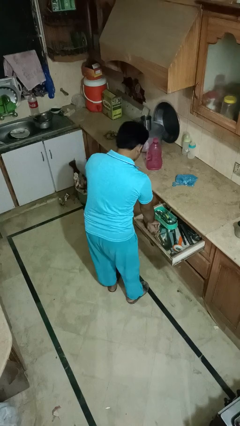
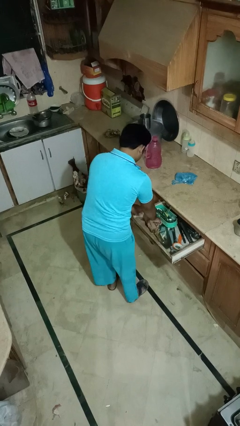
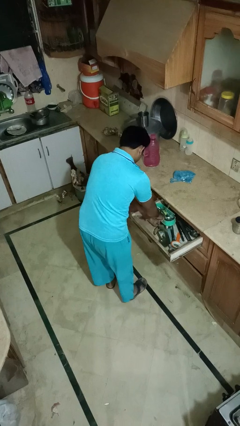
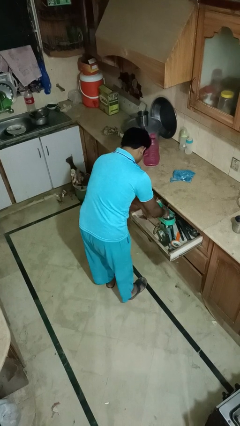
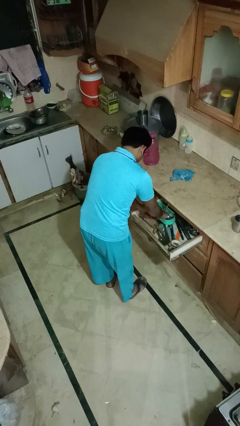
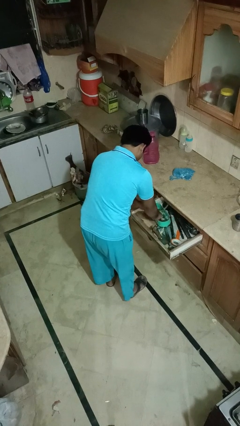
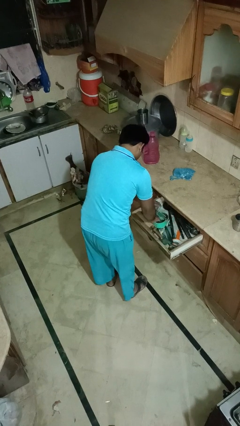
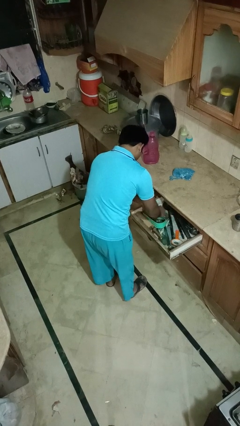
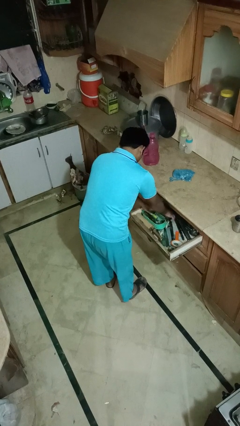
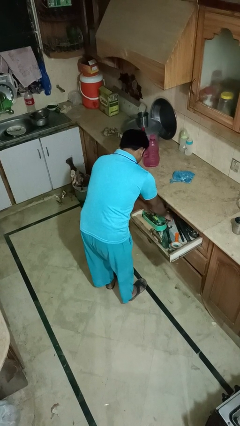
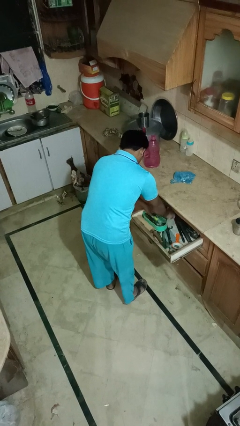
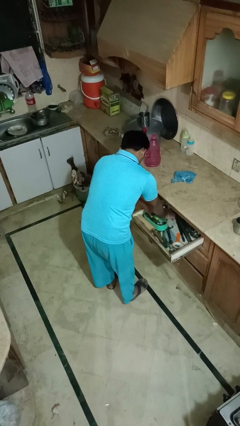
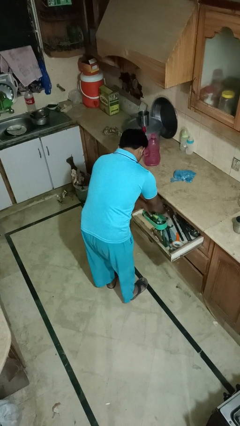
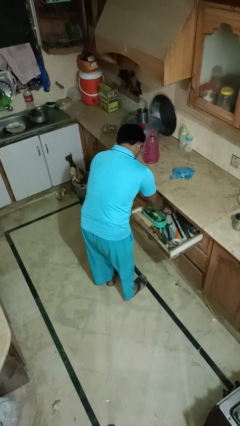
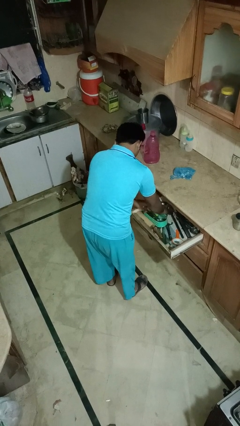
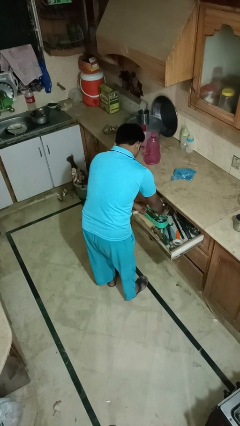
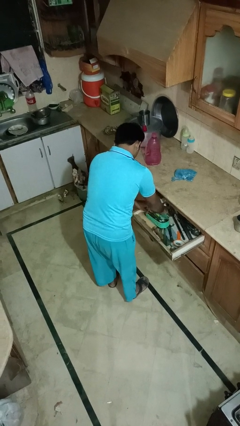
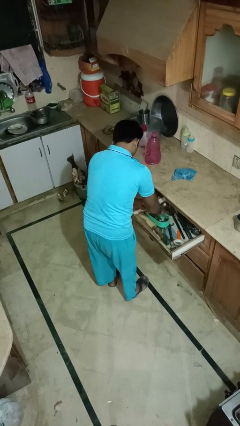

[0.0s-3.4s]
person searches in kitchen drawer

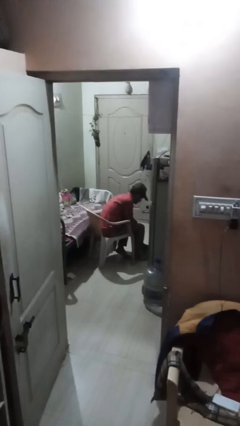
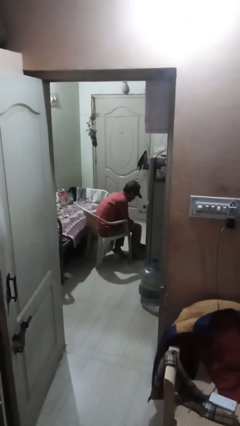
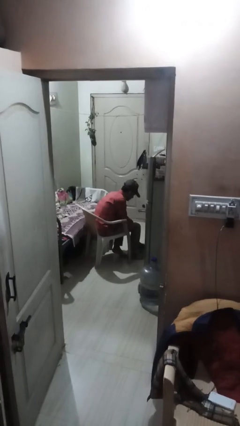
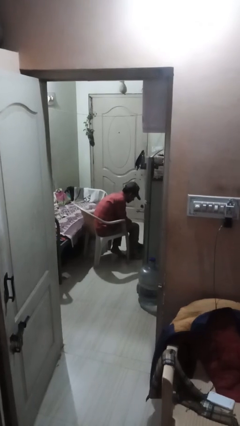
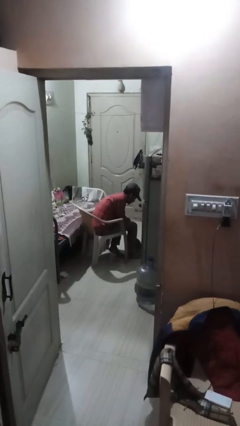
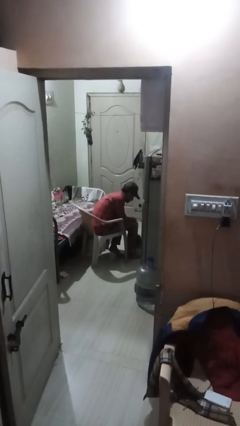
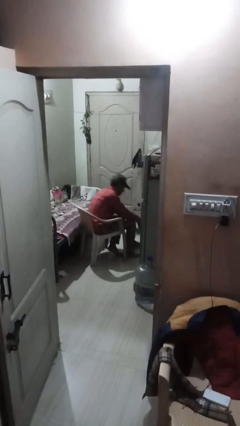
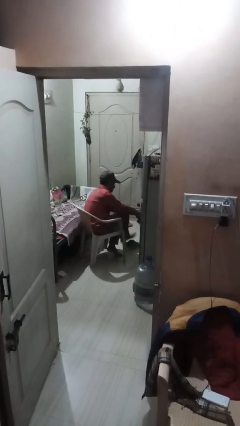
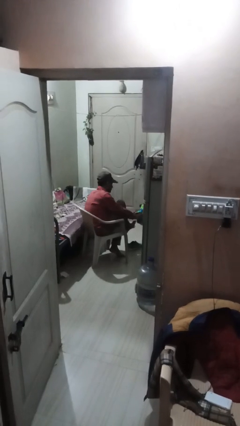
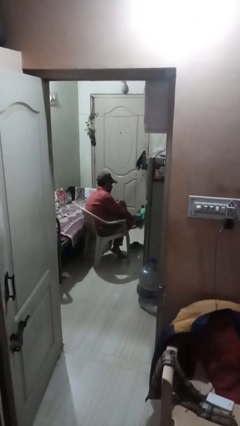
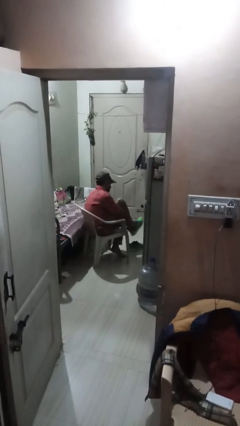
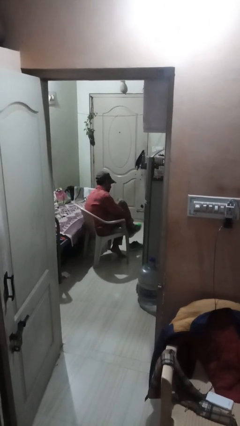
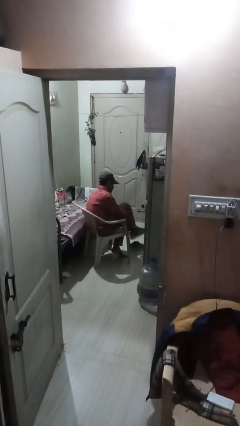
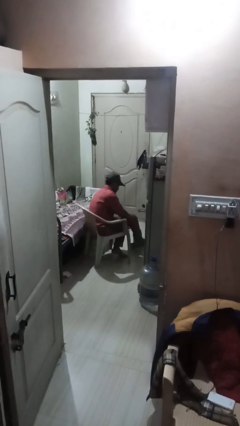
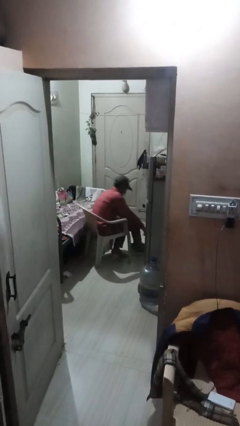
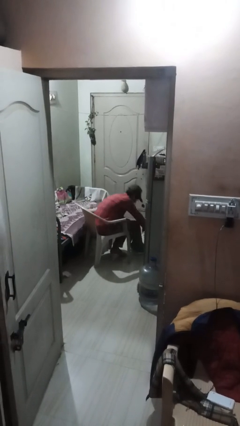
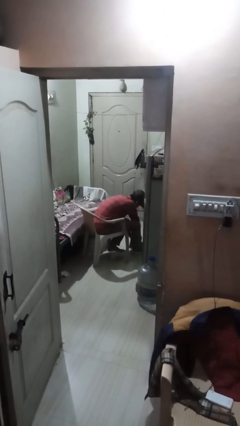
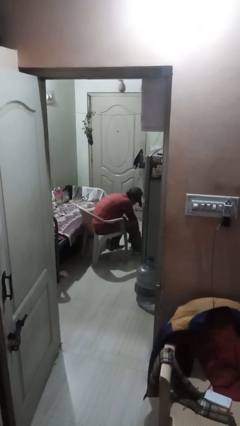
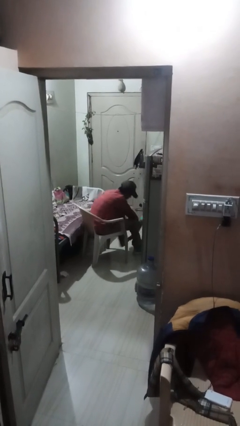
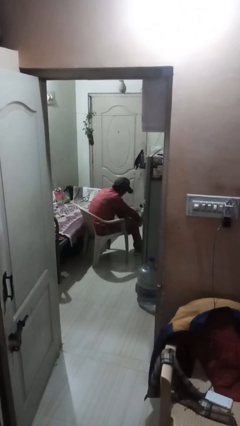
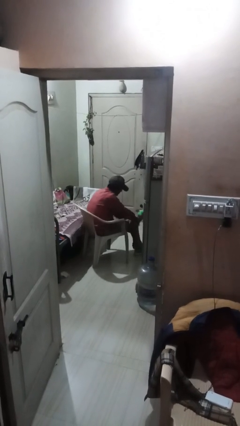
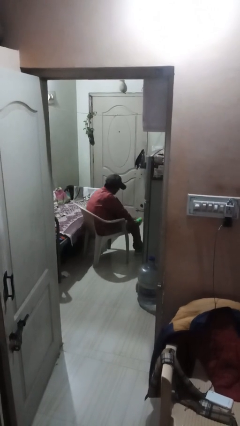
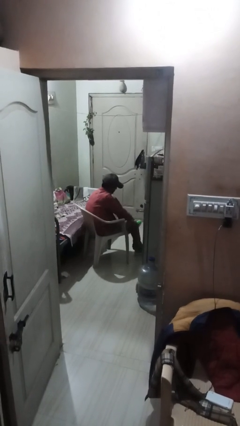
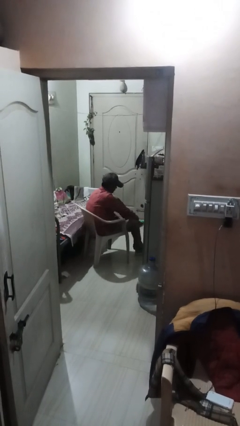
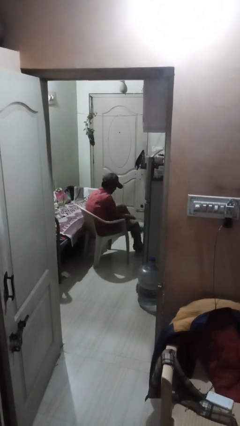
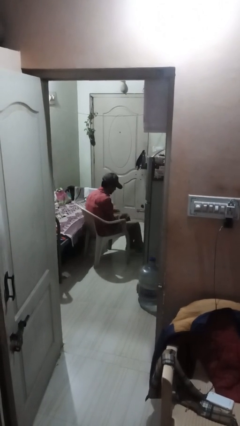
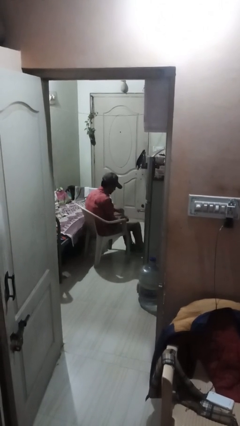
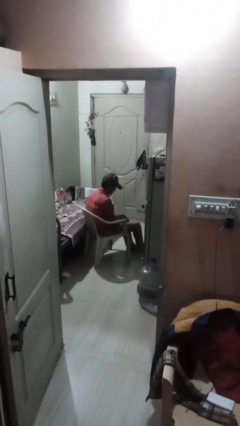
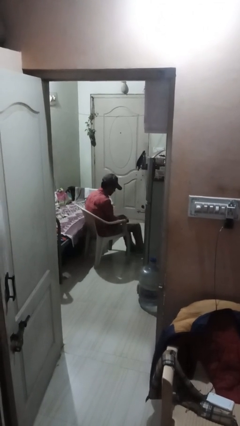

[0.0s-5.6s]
person puts on shoes

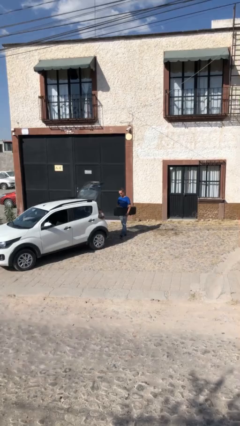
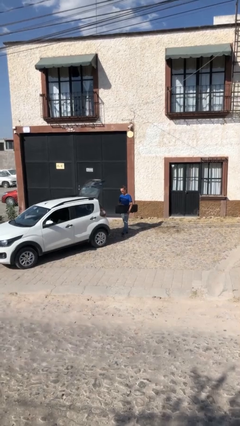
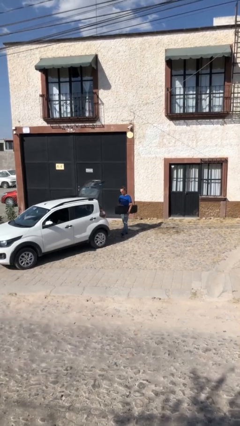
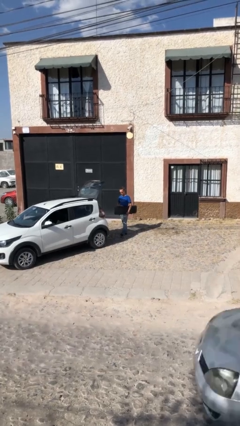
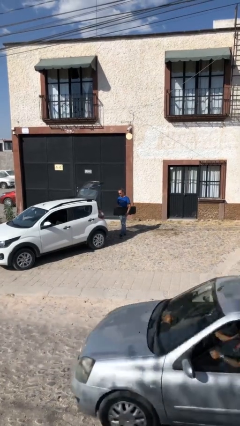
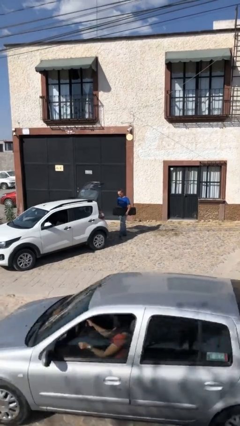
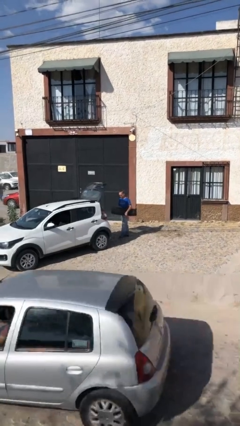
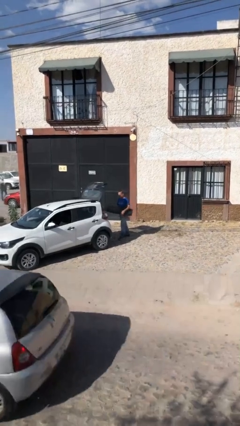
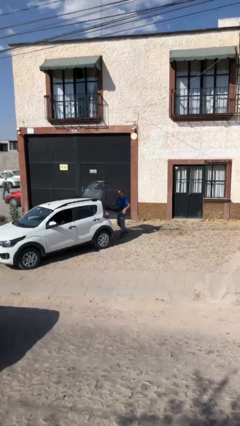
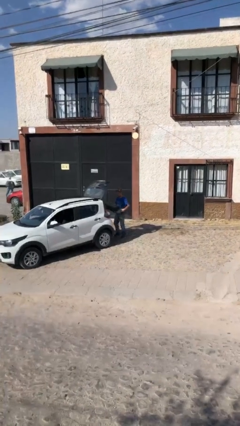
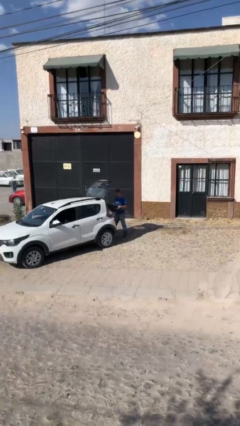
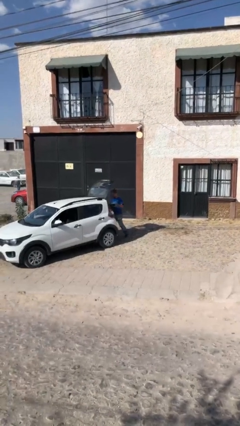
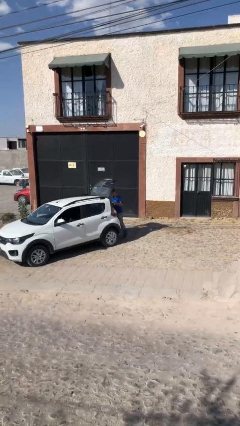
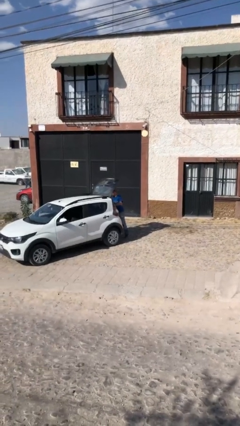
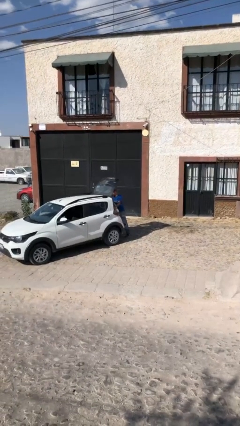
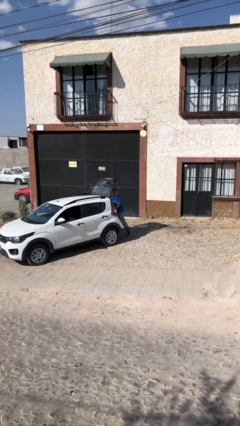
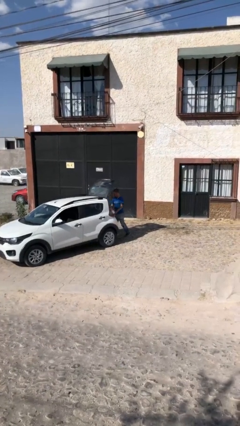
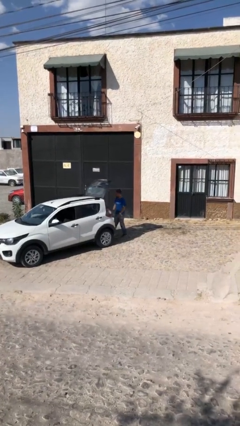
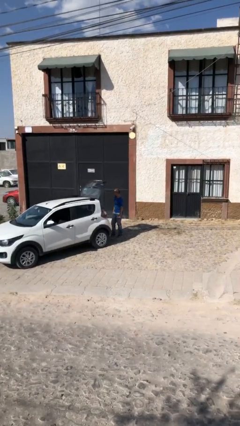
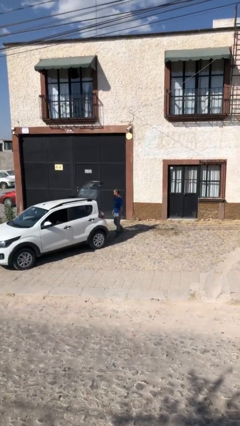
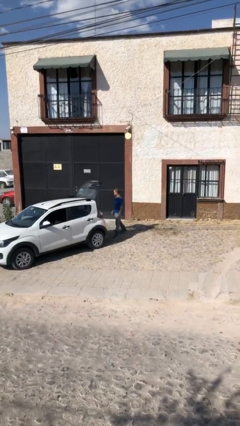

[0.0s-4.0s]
person loads car

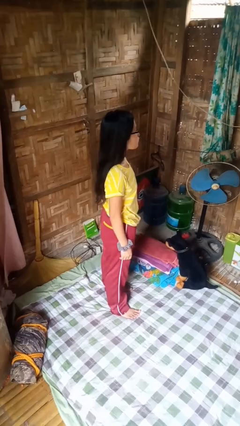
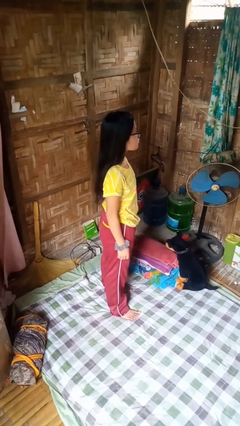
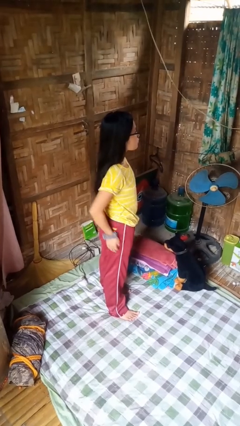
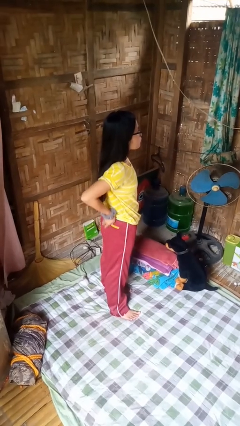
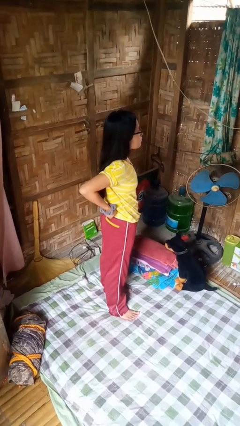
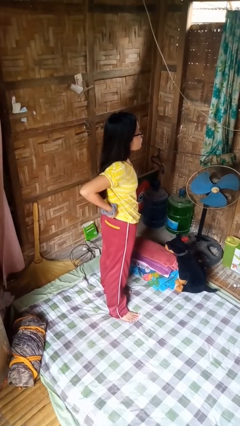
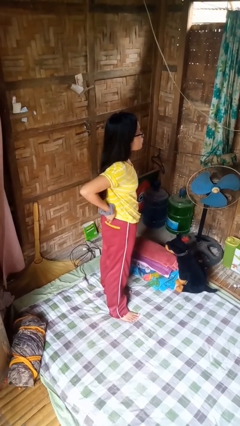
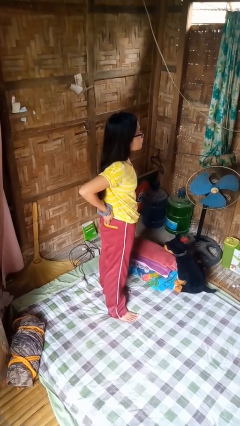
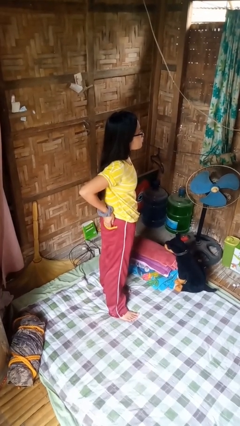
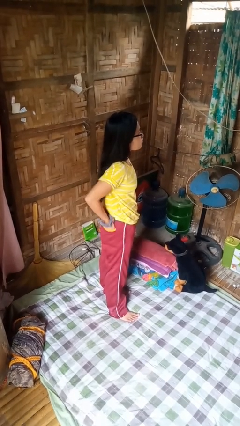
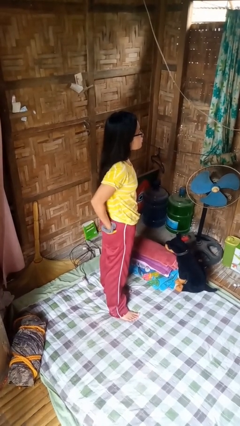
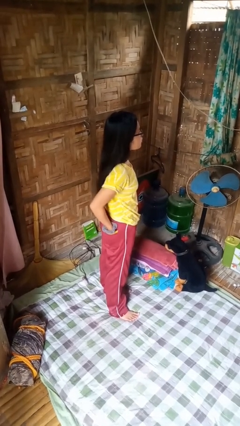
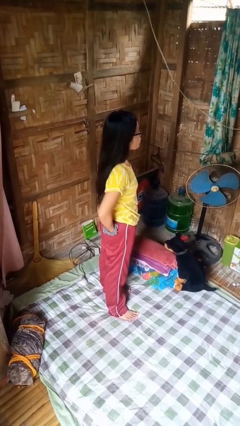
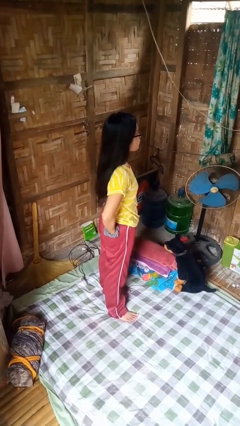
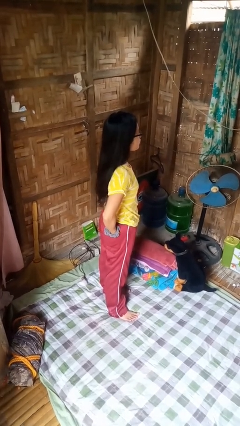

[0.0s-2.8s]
person puts hands in back pockets

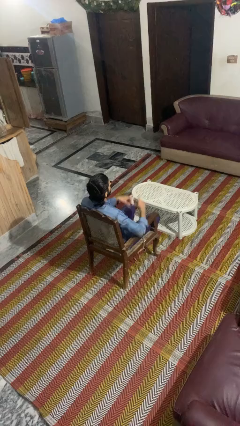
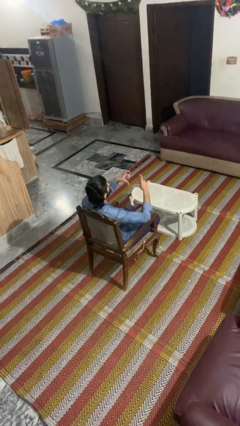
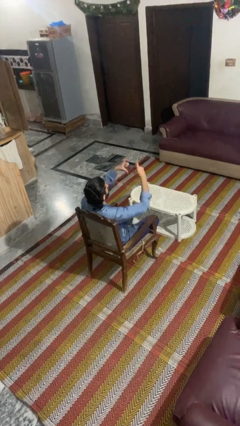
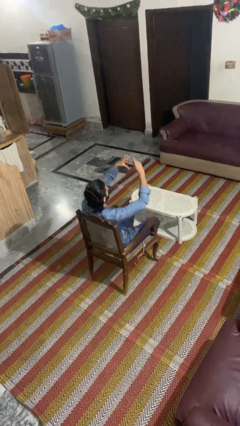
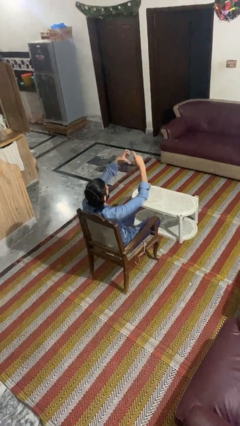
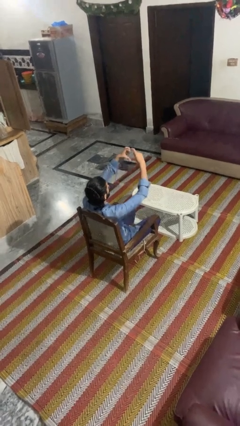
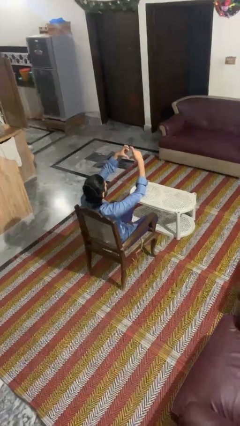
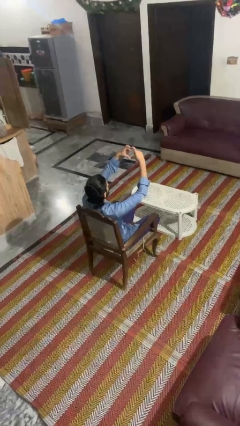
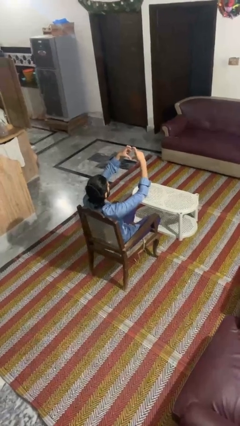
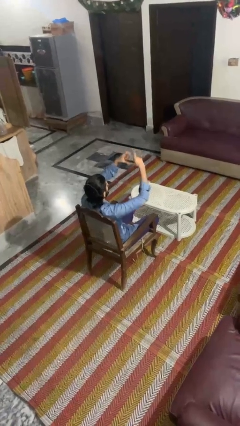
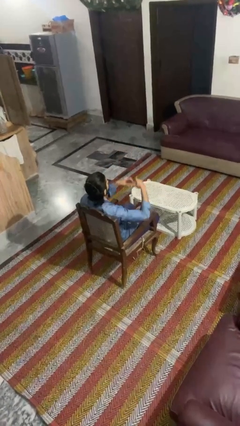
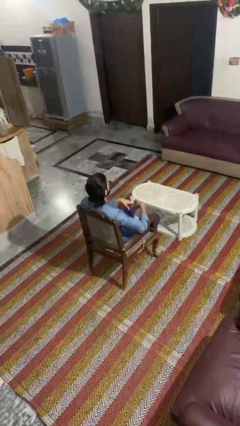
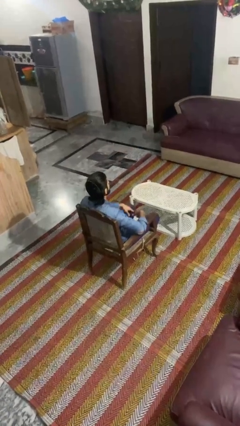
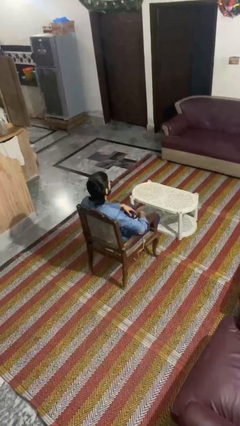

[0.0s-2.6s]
person gestures heart
